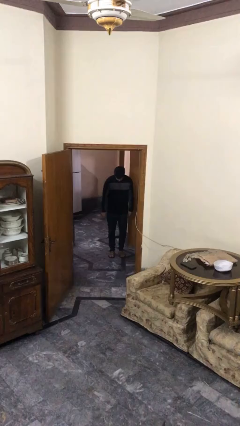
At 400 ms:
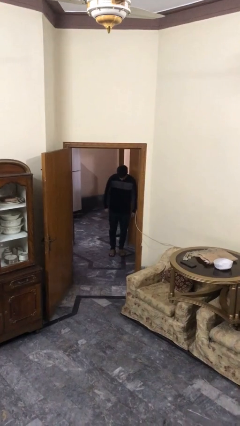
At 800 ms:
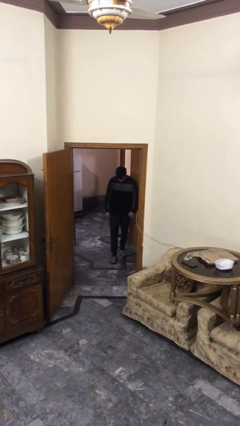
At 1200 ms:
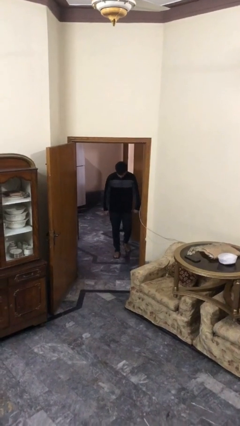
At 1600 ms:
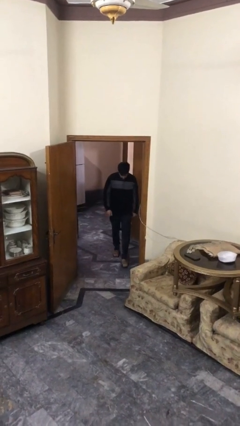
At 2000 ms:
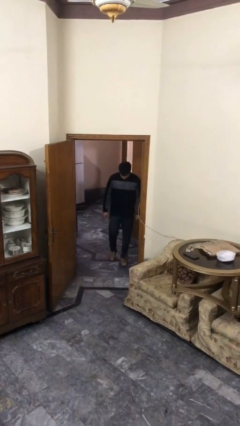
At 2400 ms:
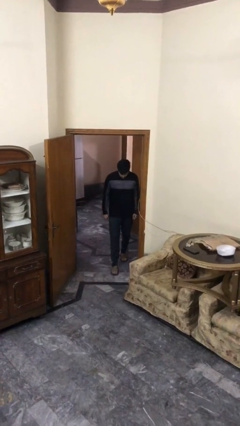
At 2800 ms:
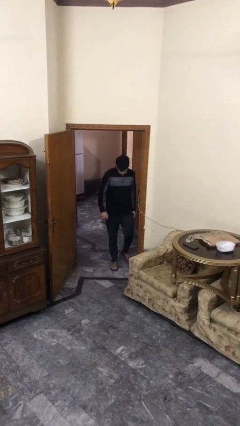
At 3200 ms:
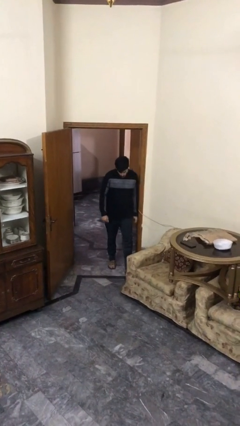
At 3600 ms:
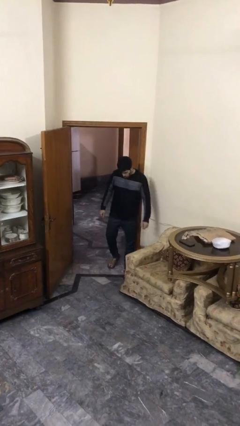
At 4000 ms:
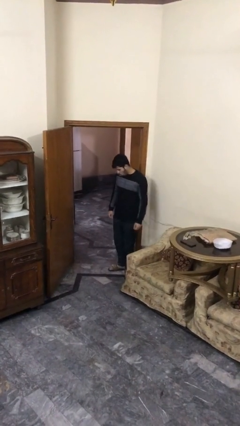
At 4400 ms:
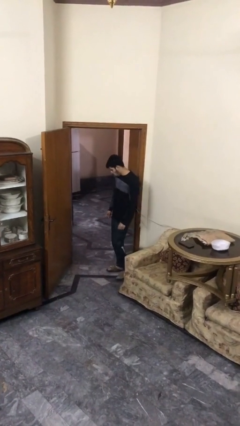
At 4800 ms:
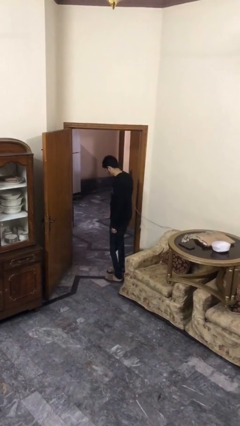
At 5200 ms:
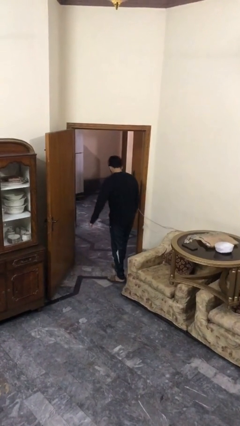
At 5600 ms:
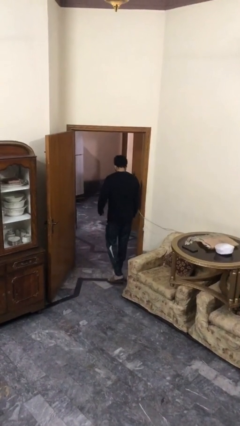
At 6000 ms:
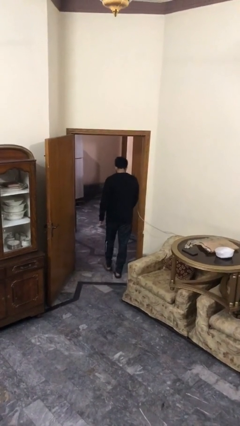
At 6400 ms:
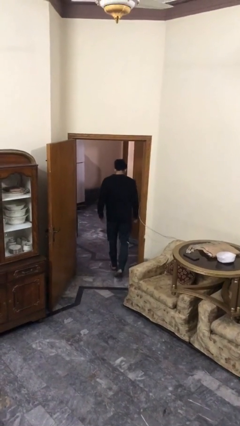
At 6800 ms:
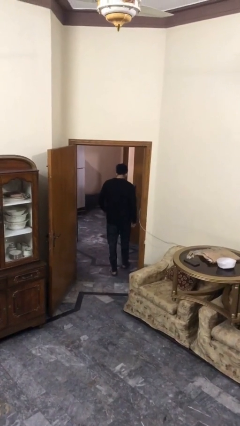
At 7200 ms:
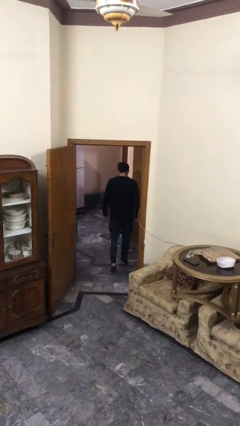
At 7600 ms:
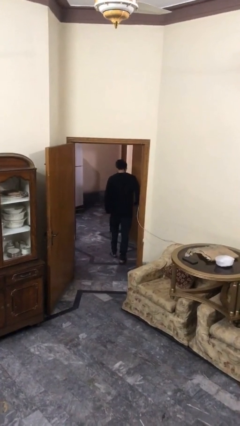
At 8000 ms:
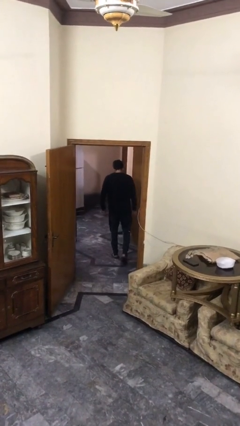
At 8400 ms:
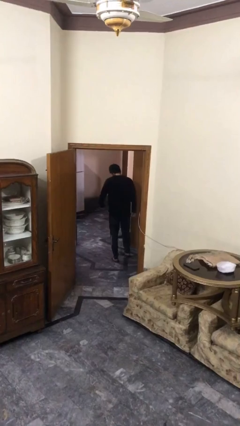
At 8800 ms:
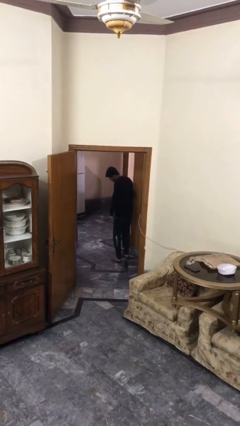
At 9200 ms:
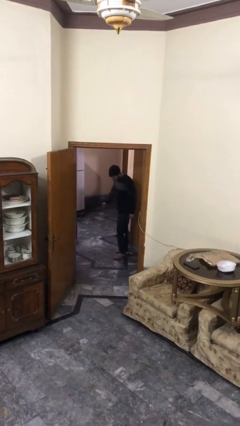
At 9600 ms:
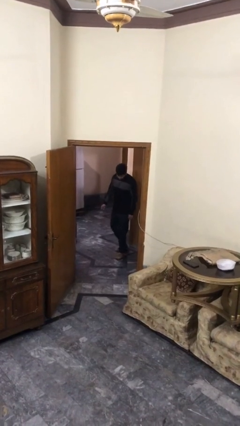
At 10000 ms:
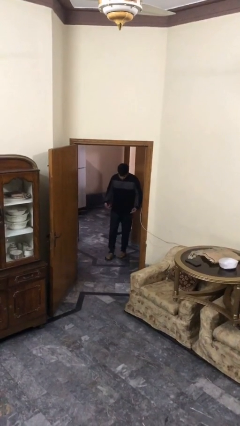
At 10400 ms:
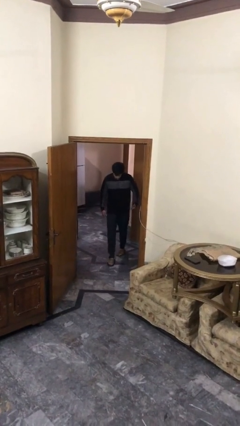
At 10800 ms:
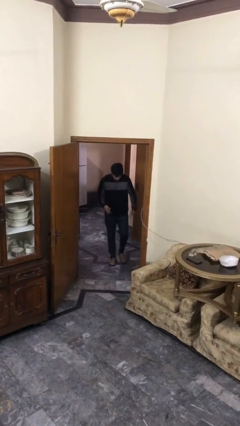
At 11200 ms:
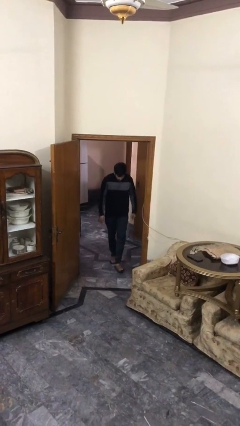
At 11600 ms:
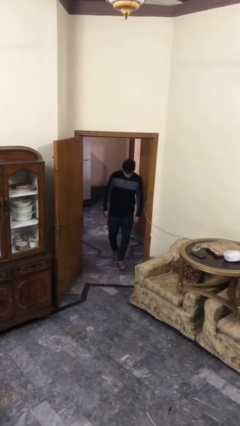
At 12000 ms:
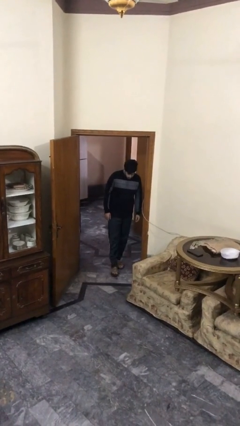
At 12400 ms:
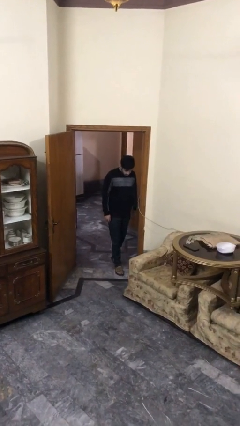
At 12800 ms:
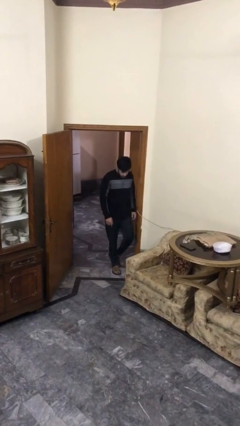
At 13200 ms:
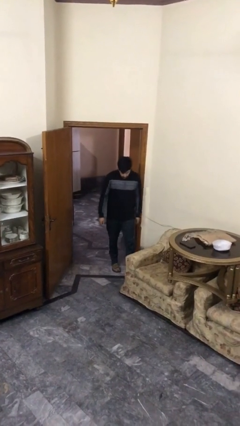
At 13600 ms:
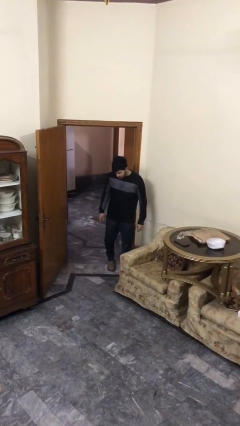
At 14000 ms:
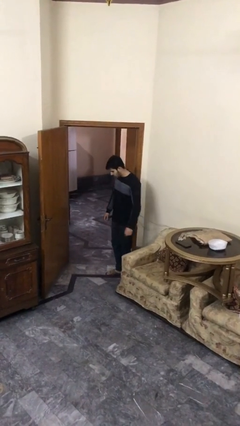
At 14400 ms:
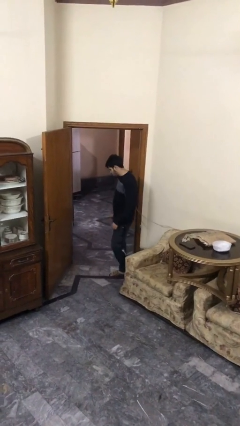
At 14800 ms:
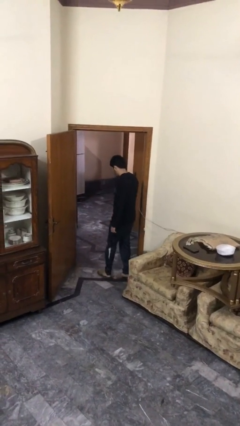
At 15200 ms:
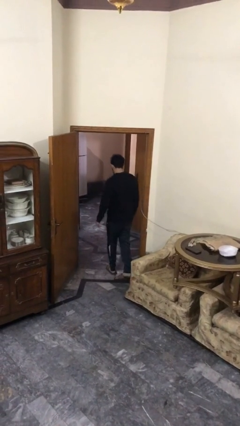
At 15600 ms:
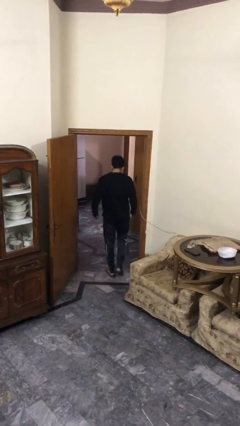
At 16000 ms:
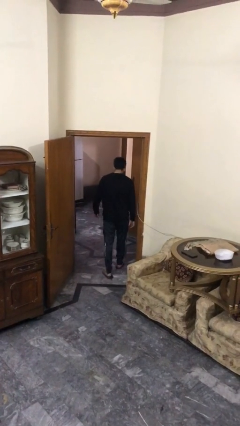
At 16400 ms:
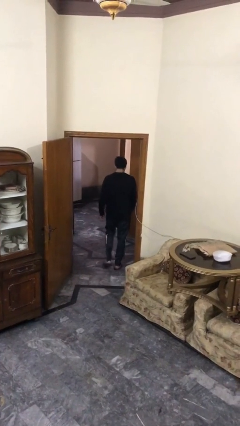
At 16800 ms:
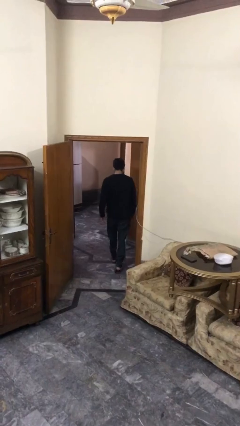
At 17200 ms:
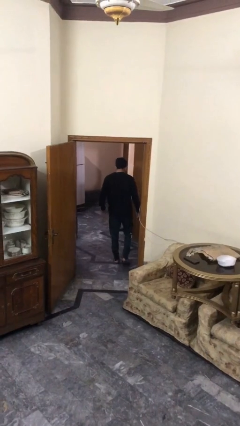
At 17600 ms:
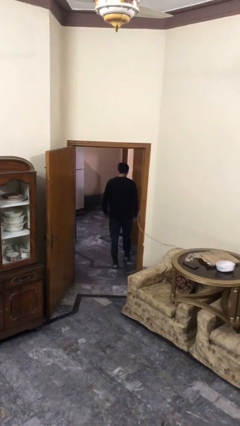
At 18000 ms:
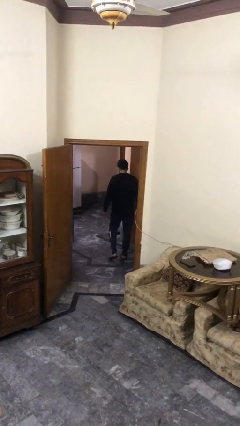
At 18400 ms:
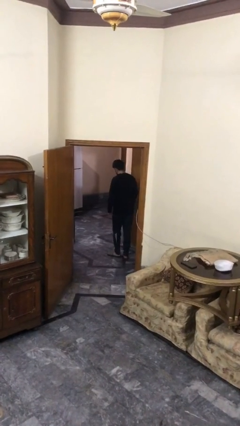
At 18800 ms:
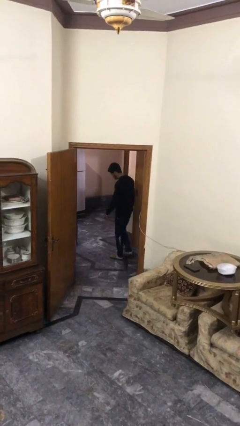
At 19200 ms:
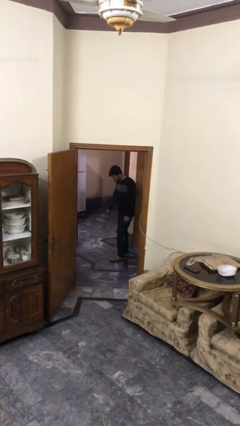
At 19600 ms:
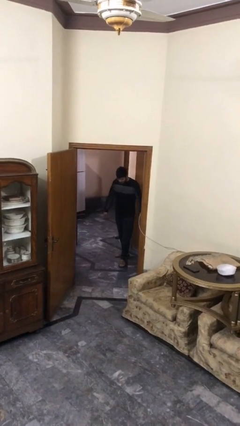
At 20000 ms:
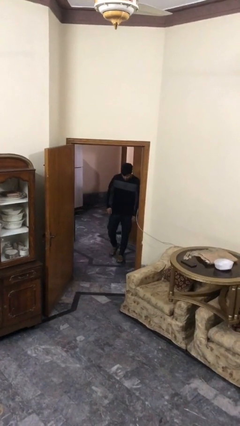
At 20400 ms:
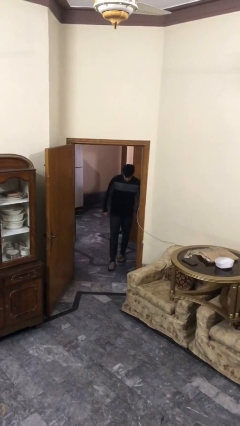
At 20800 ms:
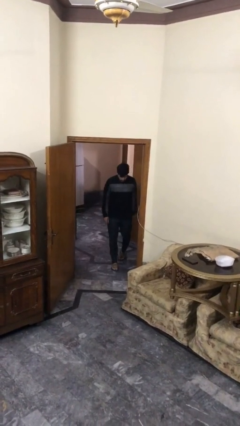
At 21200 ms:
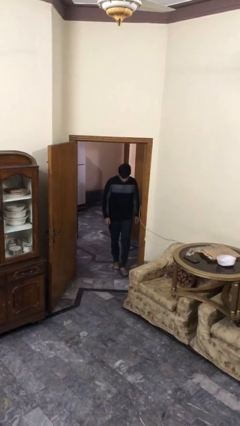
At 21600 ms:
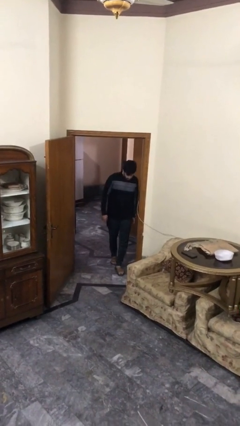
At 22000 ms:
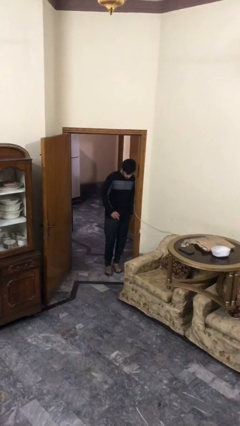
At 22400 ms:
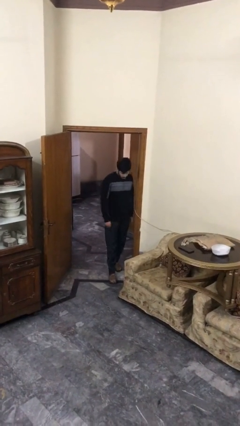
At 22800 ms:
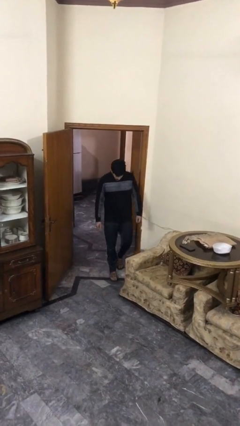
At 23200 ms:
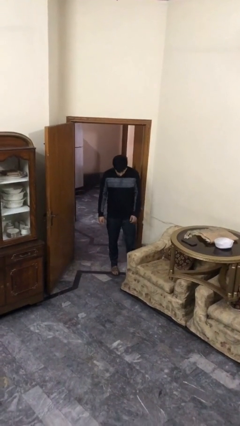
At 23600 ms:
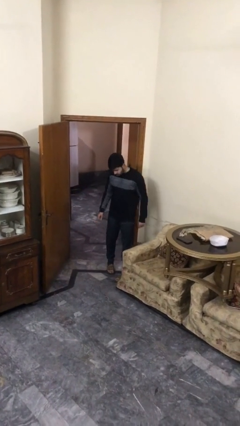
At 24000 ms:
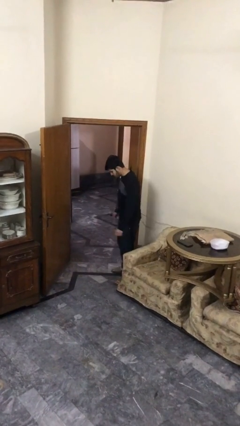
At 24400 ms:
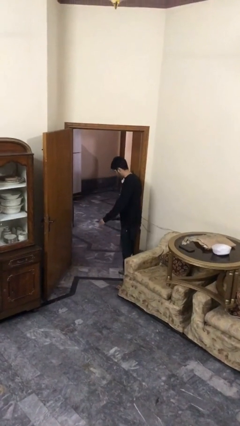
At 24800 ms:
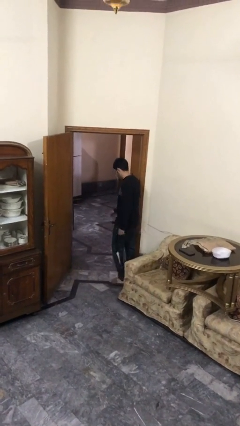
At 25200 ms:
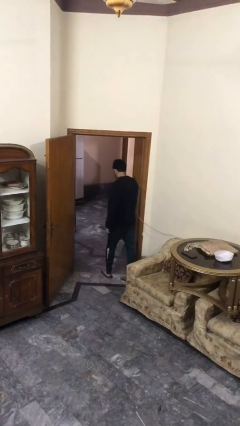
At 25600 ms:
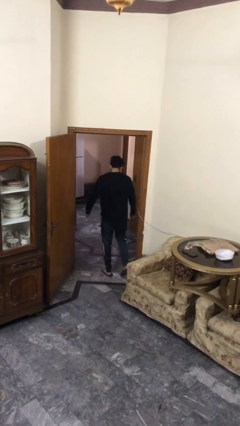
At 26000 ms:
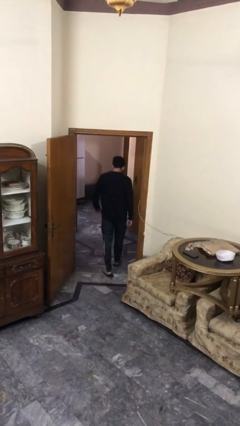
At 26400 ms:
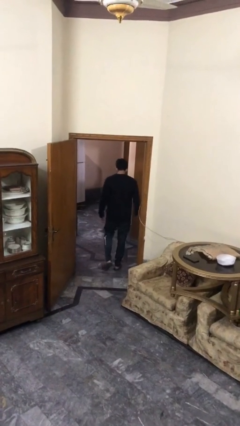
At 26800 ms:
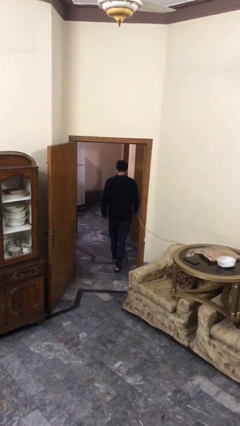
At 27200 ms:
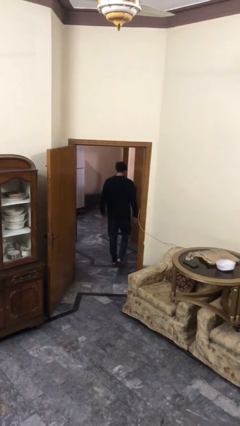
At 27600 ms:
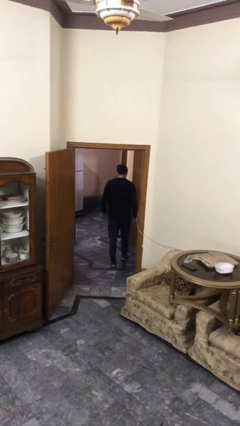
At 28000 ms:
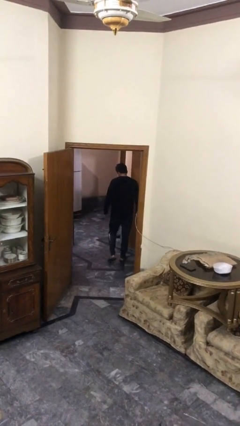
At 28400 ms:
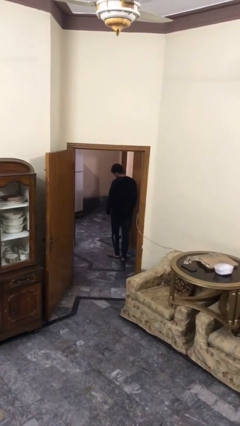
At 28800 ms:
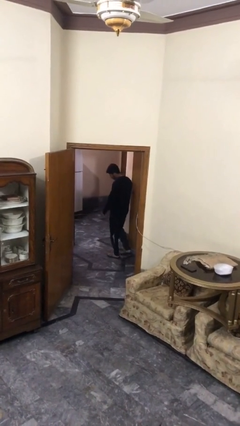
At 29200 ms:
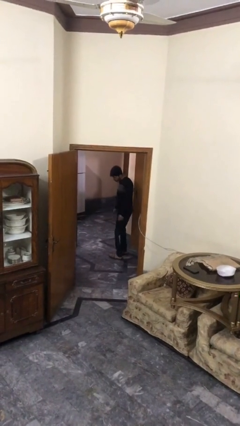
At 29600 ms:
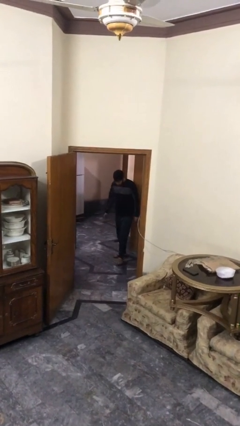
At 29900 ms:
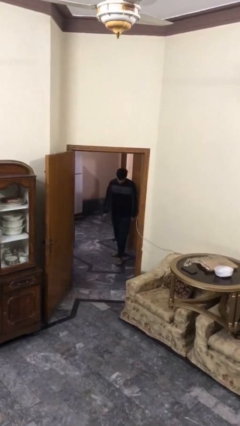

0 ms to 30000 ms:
person walks

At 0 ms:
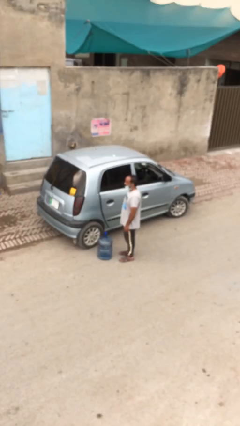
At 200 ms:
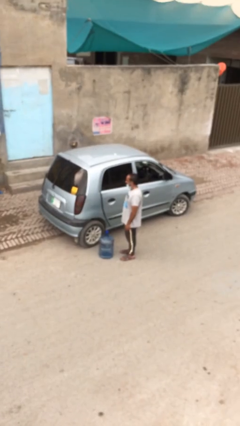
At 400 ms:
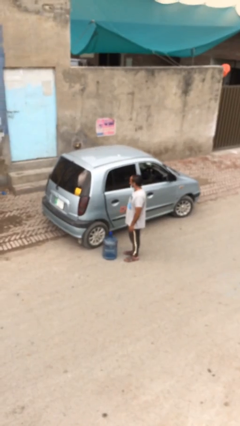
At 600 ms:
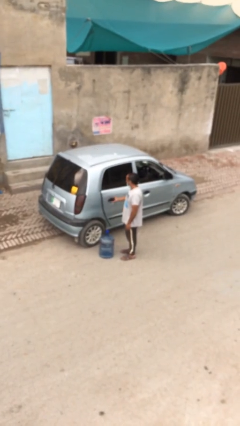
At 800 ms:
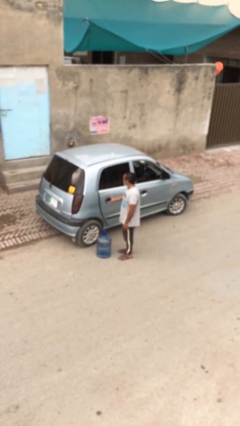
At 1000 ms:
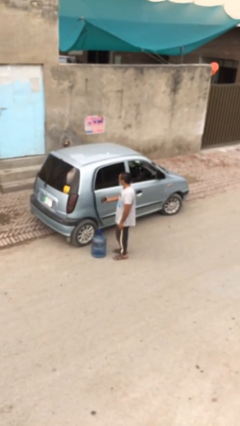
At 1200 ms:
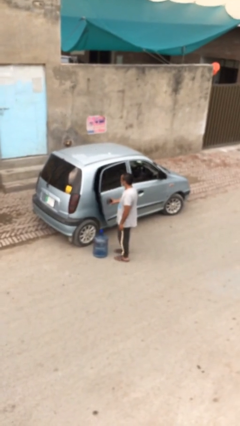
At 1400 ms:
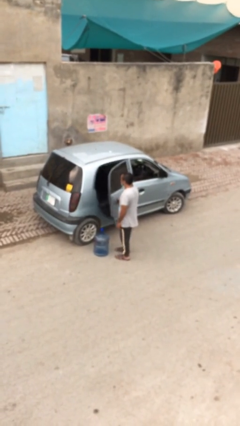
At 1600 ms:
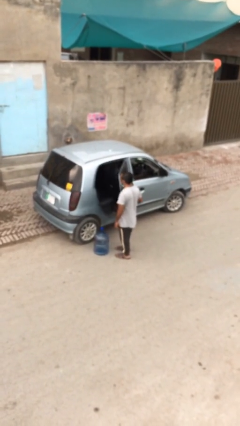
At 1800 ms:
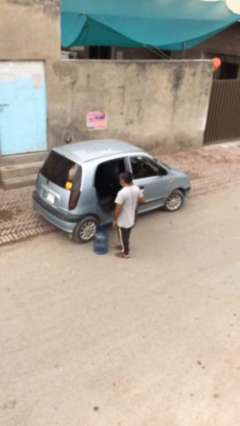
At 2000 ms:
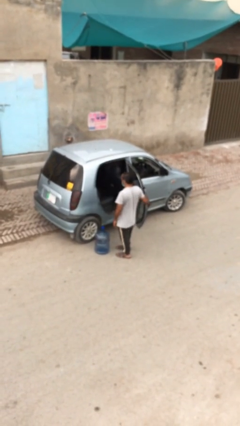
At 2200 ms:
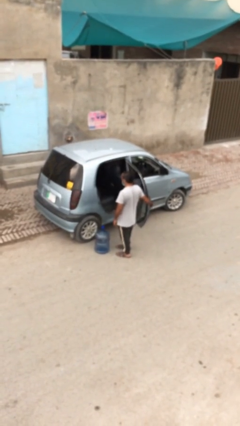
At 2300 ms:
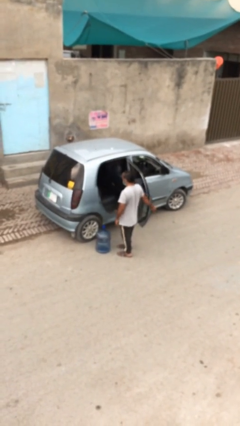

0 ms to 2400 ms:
person opens car door

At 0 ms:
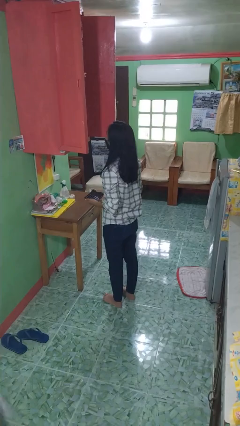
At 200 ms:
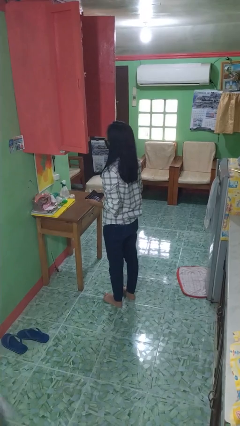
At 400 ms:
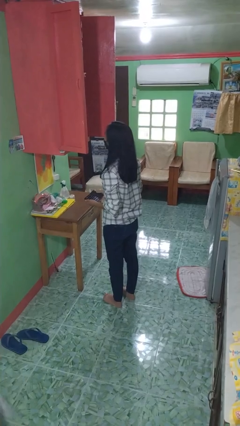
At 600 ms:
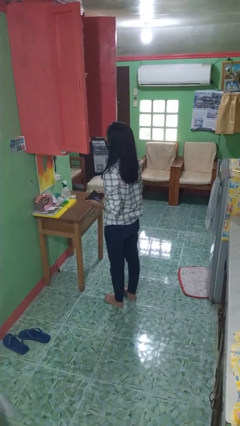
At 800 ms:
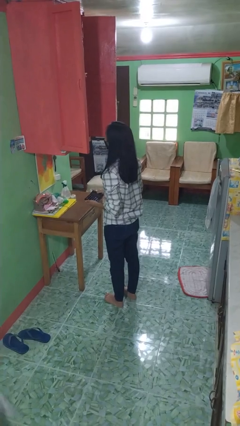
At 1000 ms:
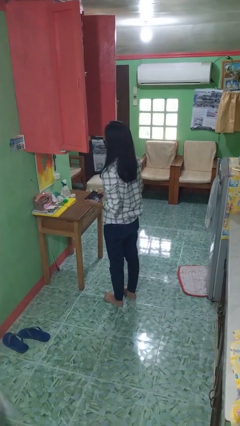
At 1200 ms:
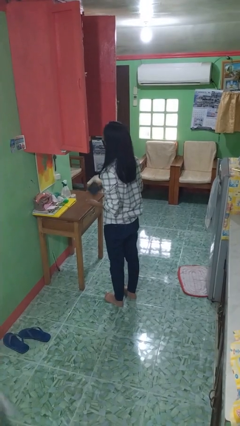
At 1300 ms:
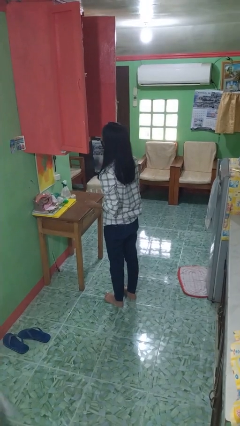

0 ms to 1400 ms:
person puts down object into cabinet
